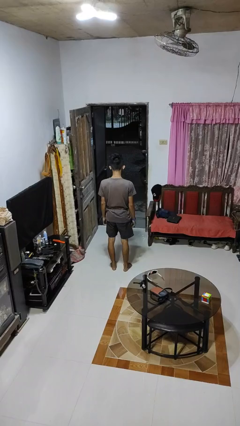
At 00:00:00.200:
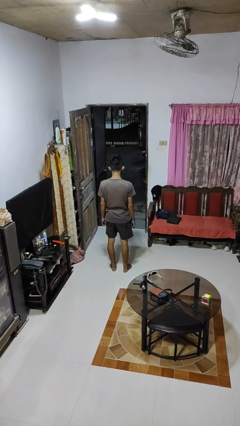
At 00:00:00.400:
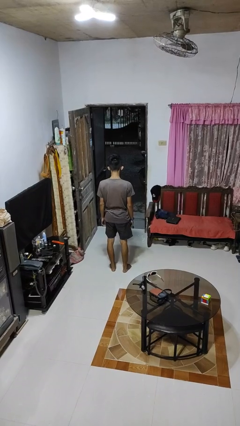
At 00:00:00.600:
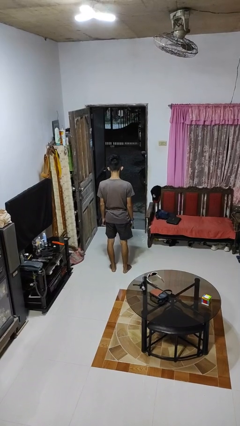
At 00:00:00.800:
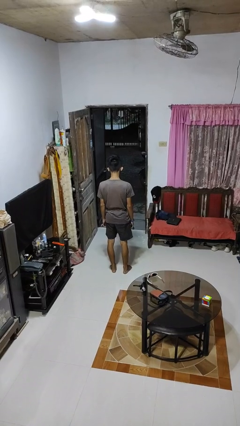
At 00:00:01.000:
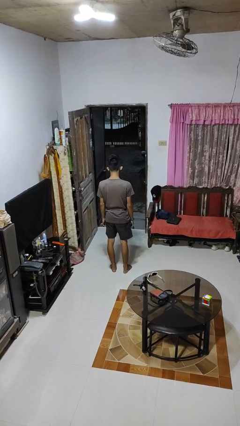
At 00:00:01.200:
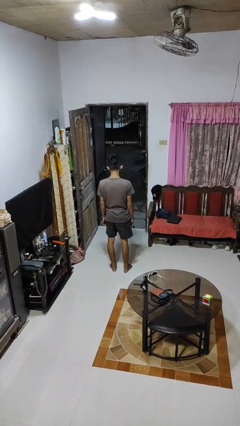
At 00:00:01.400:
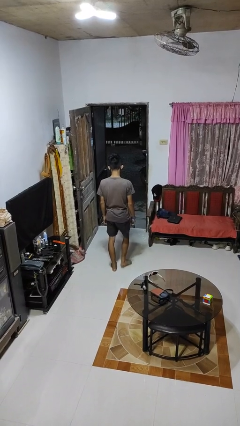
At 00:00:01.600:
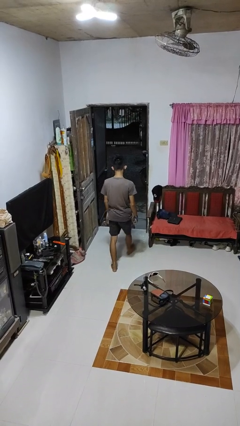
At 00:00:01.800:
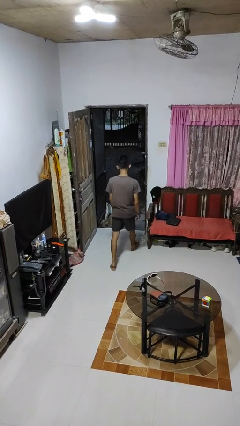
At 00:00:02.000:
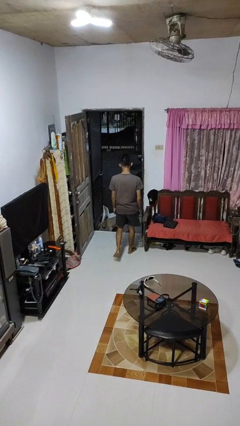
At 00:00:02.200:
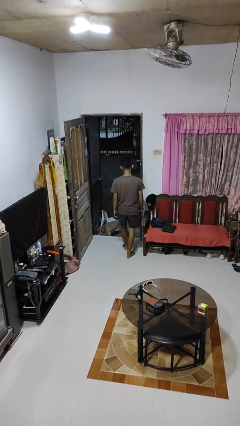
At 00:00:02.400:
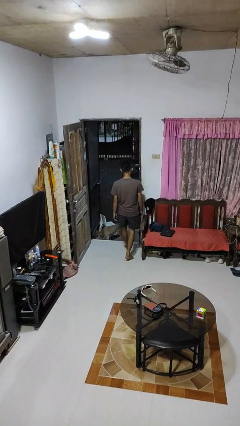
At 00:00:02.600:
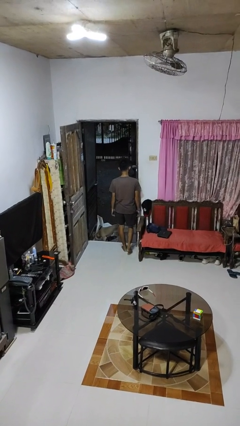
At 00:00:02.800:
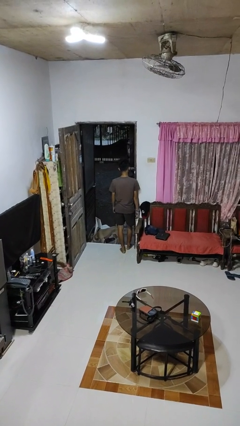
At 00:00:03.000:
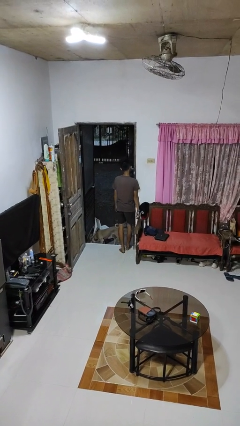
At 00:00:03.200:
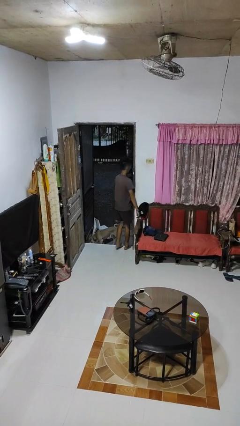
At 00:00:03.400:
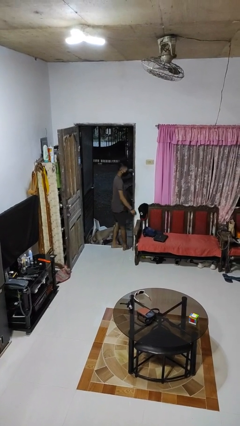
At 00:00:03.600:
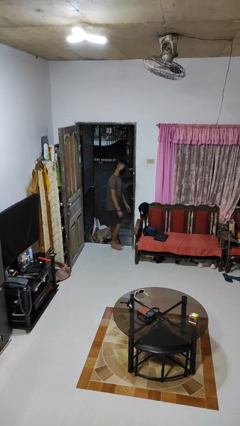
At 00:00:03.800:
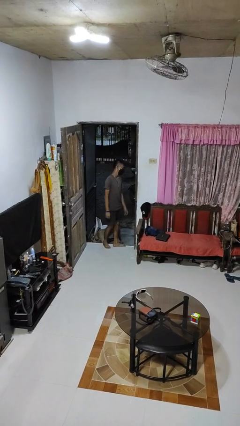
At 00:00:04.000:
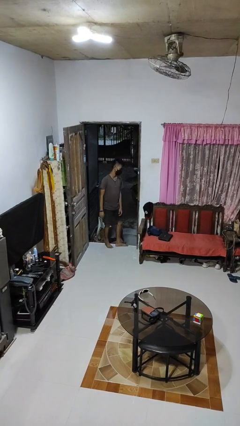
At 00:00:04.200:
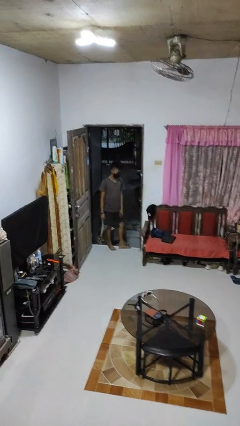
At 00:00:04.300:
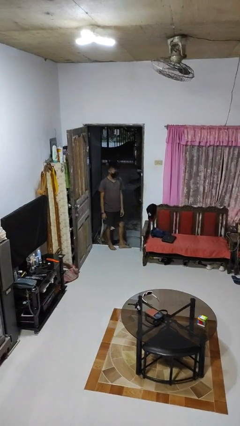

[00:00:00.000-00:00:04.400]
person bumps into wall

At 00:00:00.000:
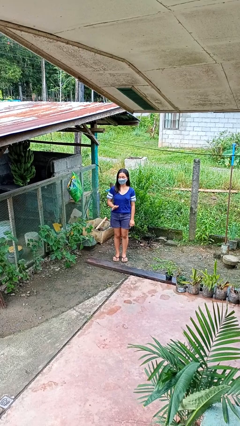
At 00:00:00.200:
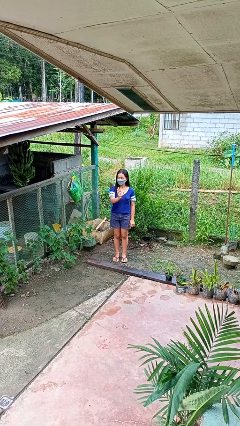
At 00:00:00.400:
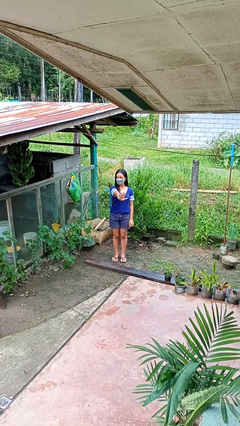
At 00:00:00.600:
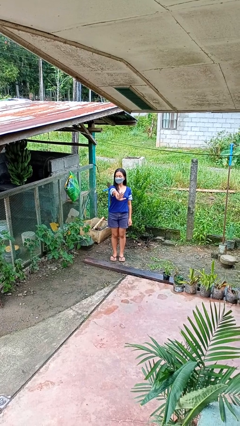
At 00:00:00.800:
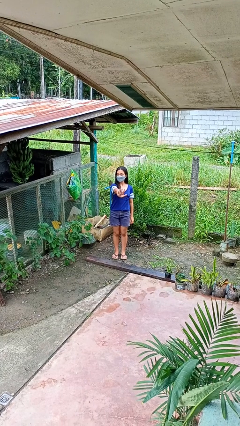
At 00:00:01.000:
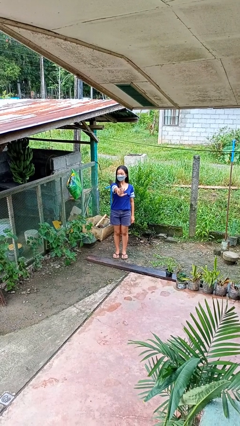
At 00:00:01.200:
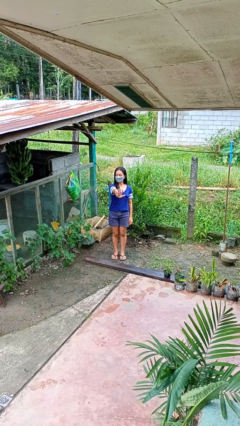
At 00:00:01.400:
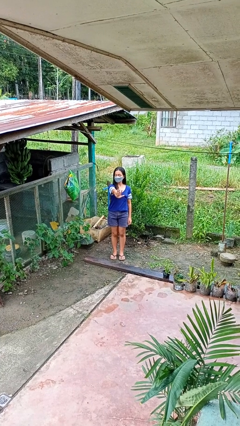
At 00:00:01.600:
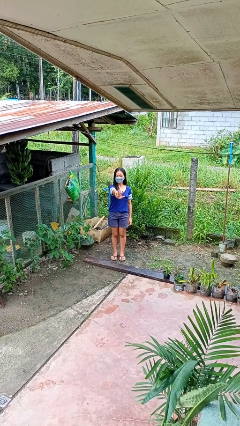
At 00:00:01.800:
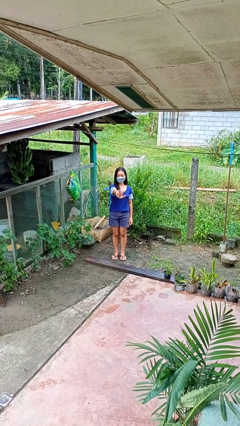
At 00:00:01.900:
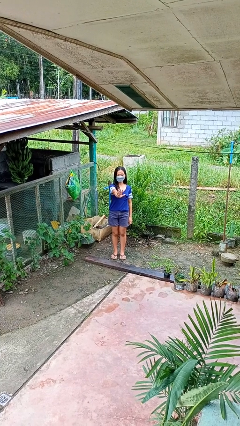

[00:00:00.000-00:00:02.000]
person gestures stop

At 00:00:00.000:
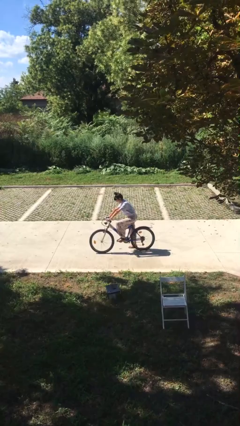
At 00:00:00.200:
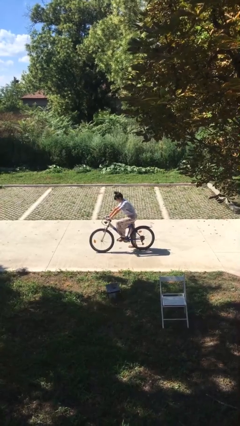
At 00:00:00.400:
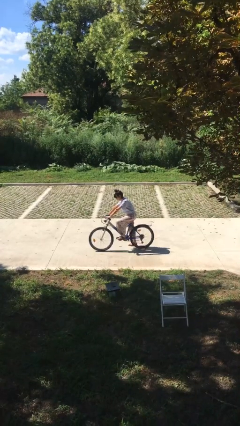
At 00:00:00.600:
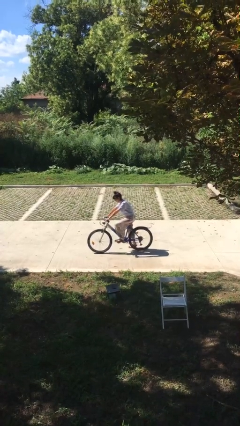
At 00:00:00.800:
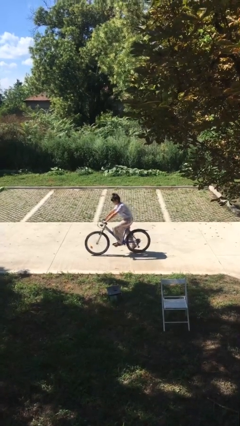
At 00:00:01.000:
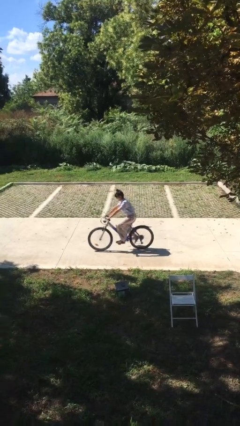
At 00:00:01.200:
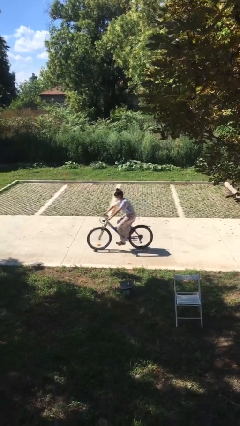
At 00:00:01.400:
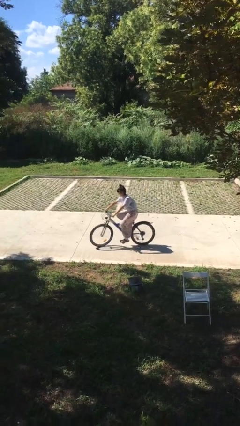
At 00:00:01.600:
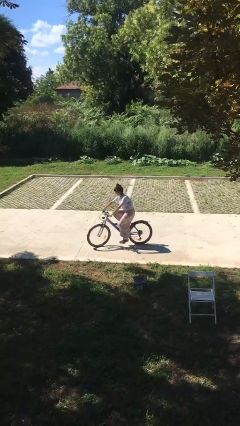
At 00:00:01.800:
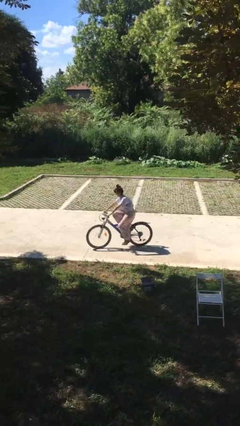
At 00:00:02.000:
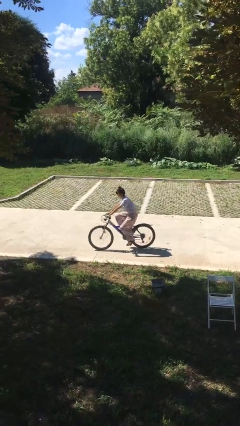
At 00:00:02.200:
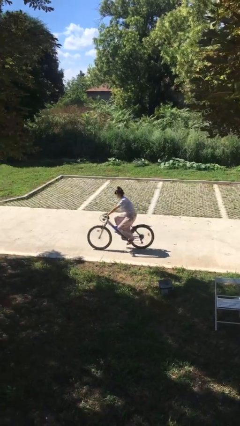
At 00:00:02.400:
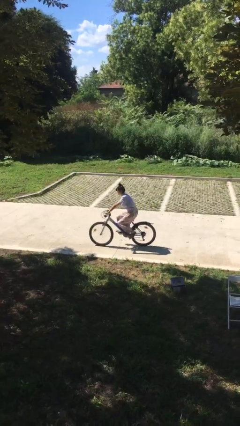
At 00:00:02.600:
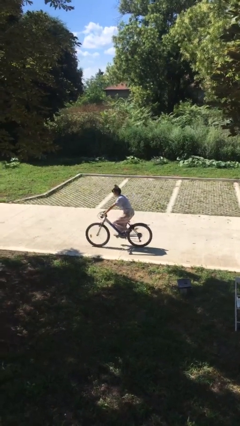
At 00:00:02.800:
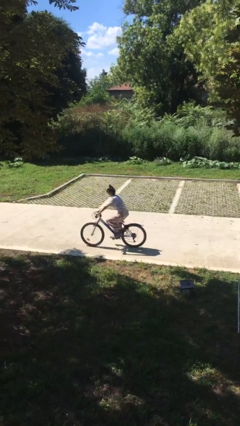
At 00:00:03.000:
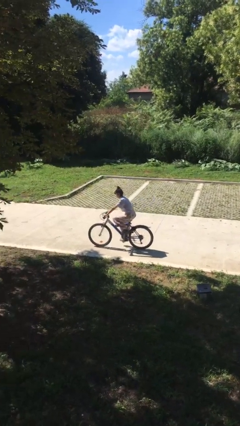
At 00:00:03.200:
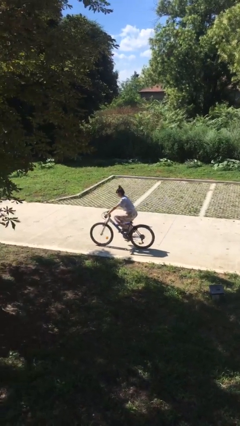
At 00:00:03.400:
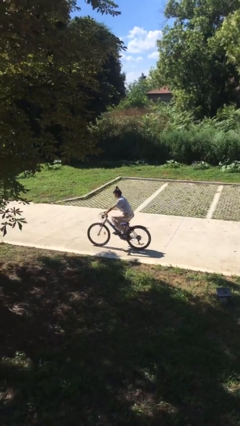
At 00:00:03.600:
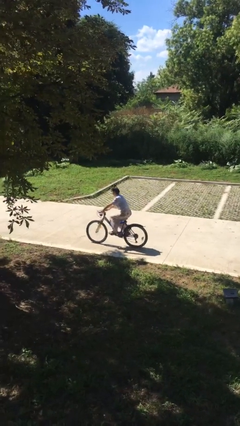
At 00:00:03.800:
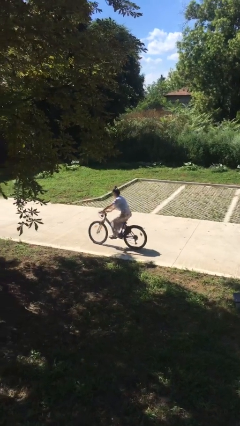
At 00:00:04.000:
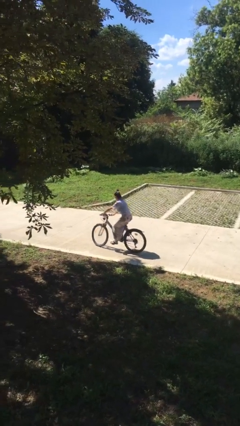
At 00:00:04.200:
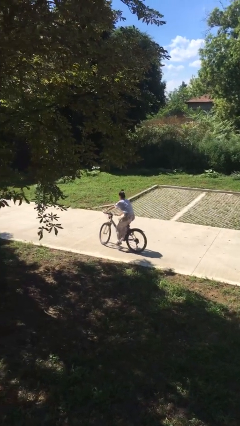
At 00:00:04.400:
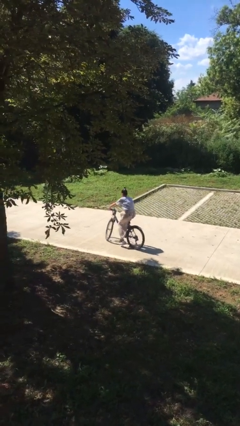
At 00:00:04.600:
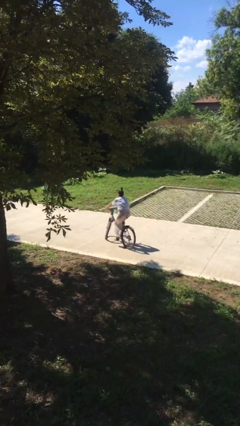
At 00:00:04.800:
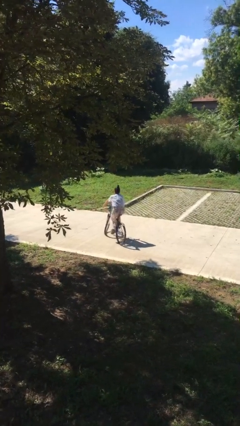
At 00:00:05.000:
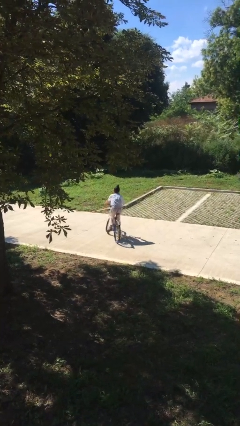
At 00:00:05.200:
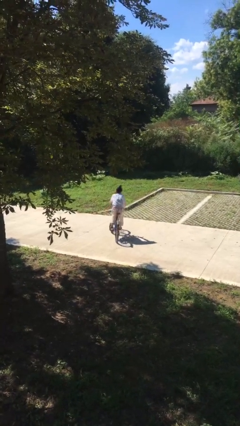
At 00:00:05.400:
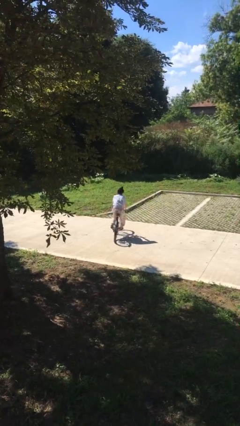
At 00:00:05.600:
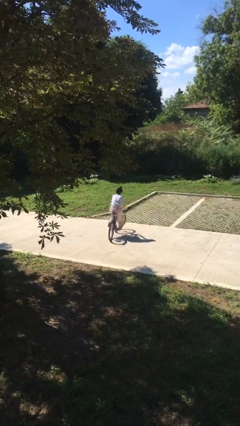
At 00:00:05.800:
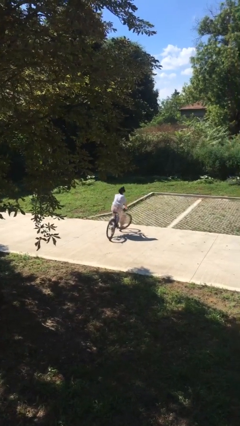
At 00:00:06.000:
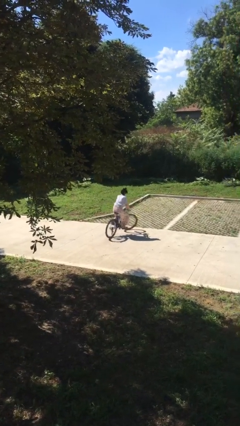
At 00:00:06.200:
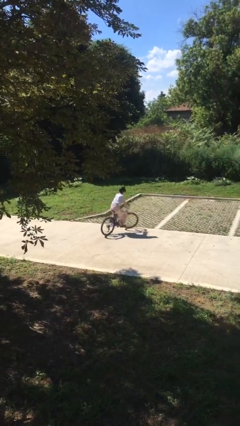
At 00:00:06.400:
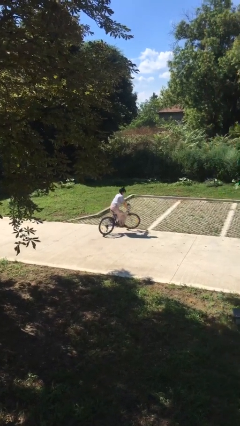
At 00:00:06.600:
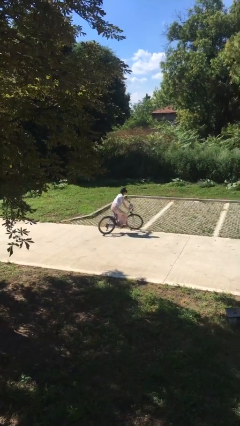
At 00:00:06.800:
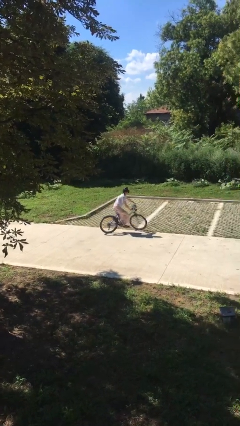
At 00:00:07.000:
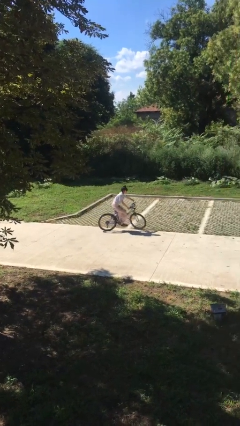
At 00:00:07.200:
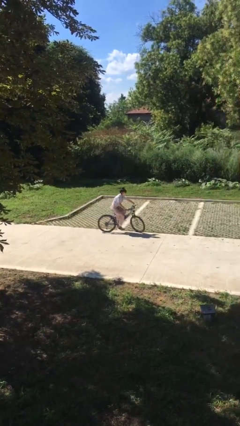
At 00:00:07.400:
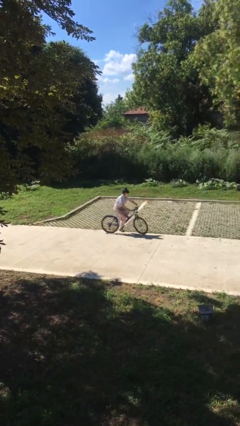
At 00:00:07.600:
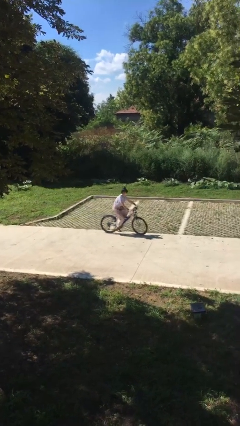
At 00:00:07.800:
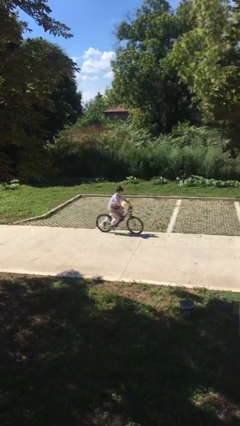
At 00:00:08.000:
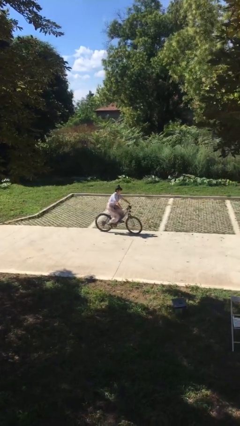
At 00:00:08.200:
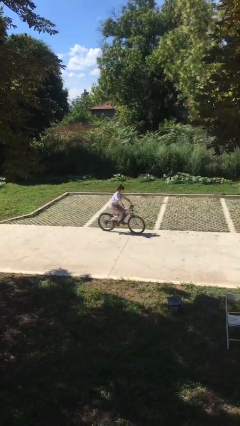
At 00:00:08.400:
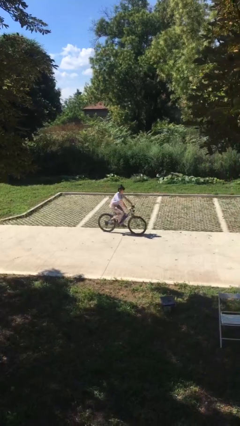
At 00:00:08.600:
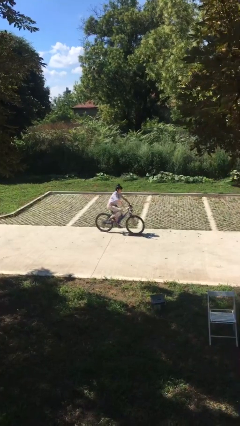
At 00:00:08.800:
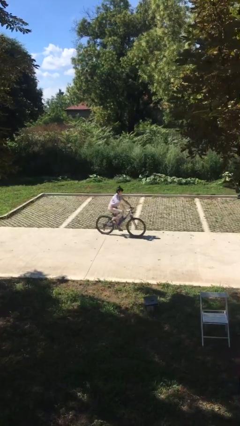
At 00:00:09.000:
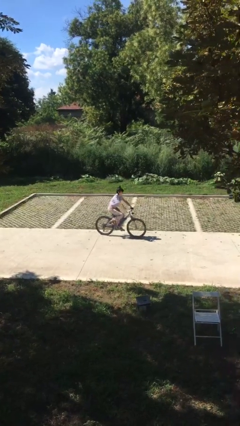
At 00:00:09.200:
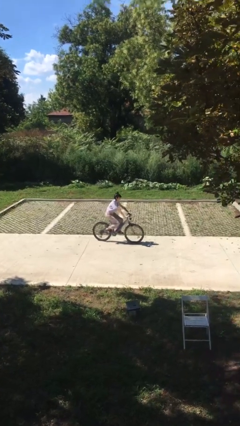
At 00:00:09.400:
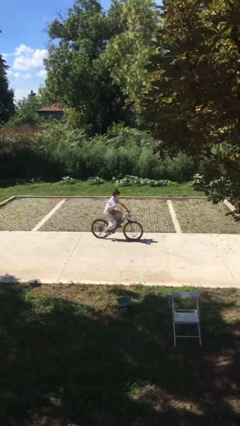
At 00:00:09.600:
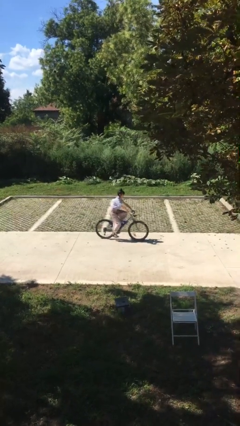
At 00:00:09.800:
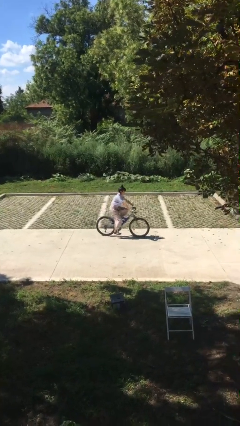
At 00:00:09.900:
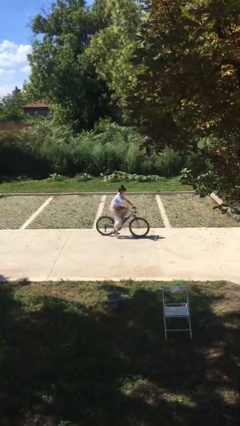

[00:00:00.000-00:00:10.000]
person rides bicycle

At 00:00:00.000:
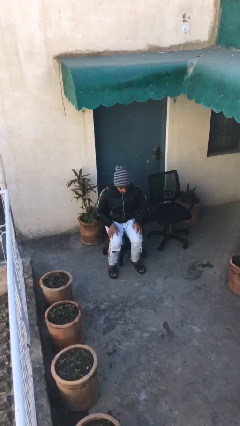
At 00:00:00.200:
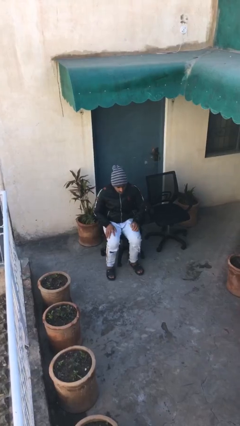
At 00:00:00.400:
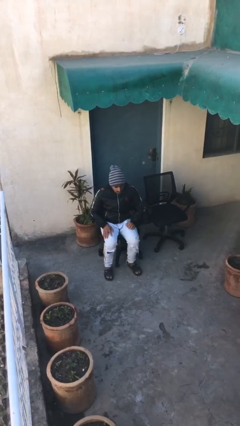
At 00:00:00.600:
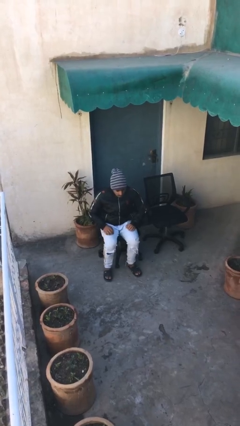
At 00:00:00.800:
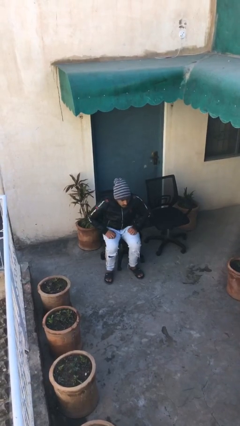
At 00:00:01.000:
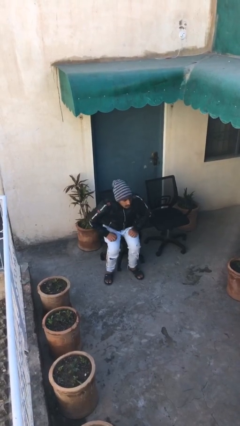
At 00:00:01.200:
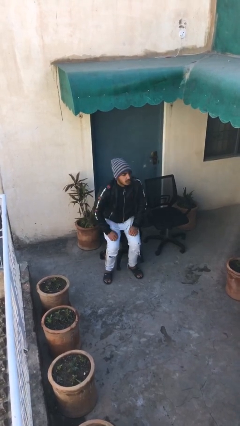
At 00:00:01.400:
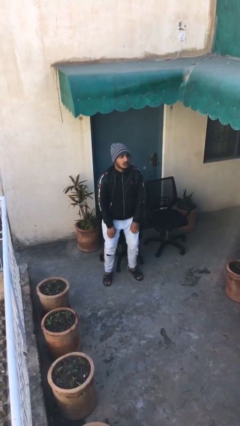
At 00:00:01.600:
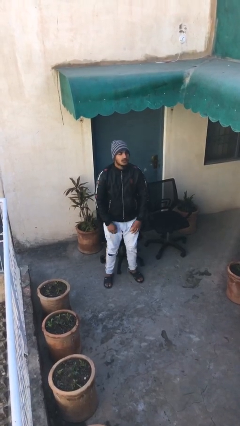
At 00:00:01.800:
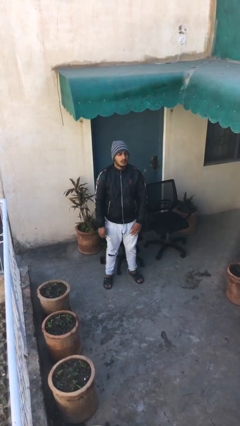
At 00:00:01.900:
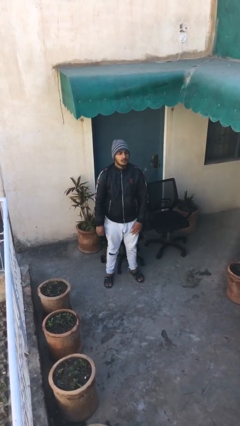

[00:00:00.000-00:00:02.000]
person stands up
